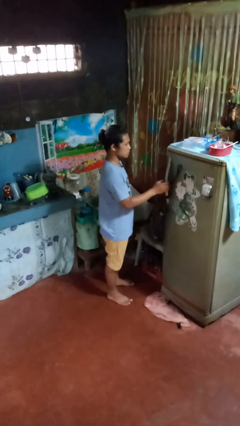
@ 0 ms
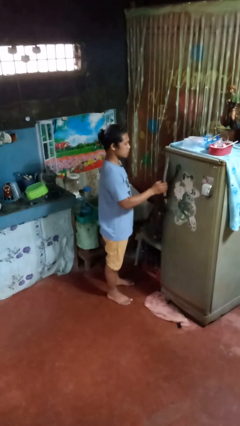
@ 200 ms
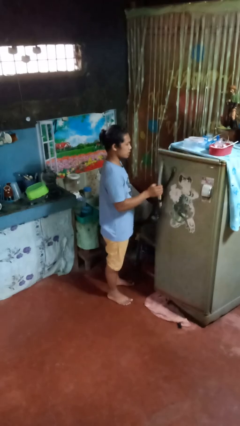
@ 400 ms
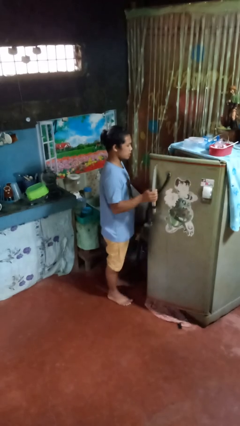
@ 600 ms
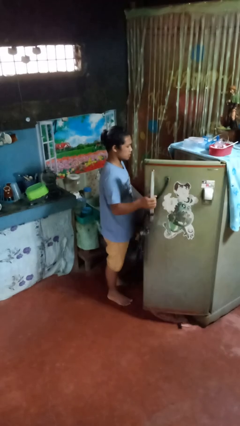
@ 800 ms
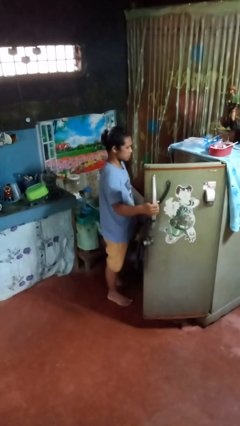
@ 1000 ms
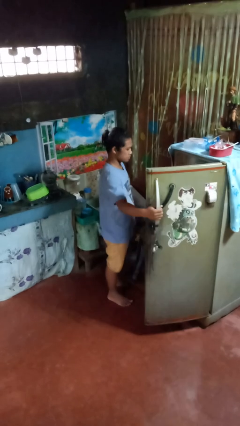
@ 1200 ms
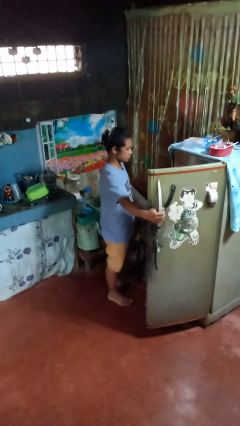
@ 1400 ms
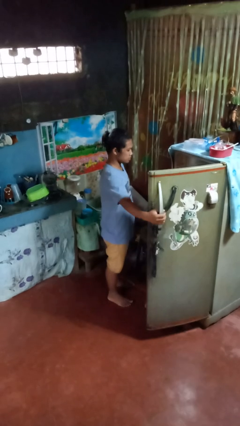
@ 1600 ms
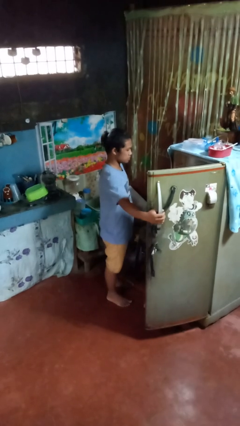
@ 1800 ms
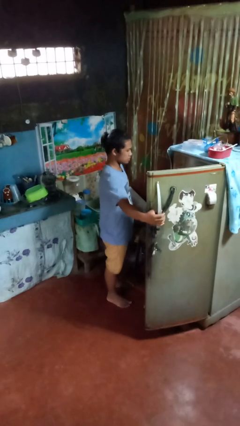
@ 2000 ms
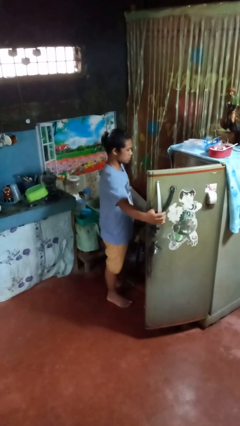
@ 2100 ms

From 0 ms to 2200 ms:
person opens refrigerator

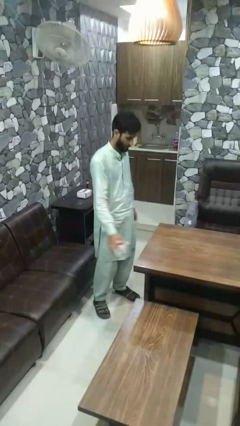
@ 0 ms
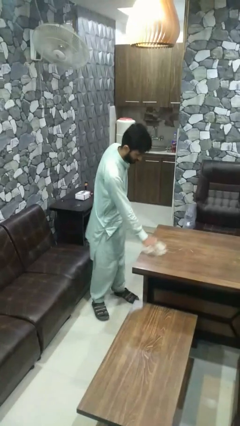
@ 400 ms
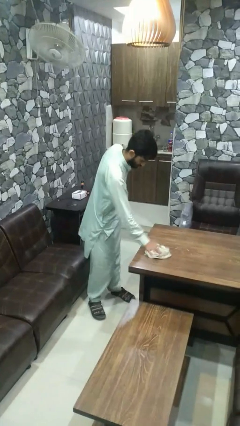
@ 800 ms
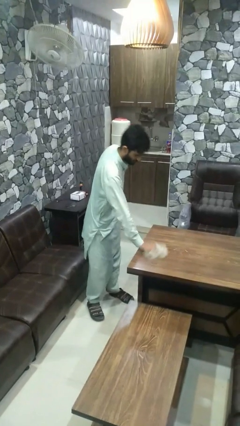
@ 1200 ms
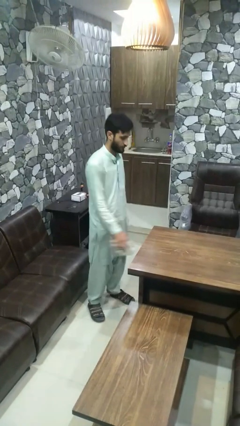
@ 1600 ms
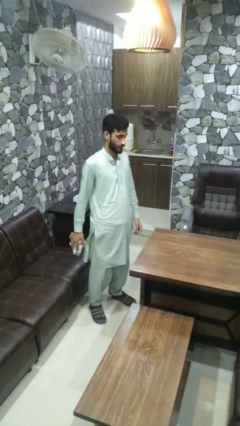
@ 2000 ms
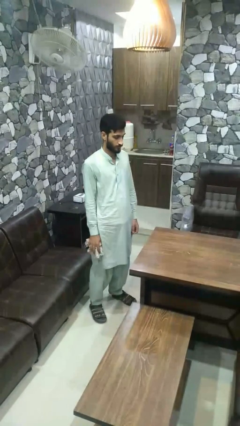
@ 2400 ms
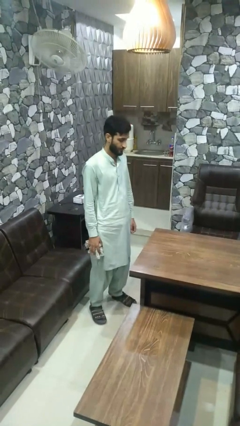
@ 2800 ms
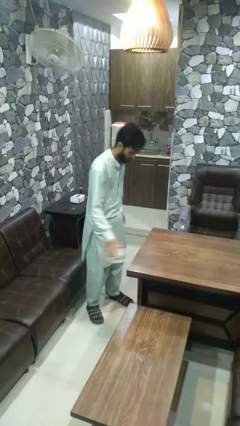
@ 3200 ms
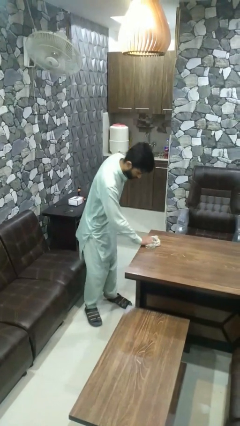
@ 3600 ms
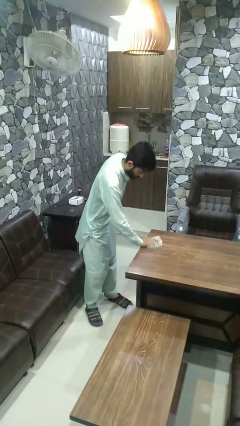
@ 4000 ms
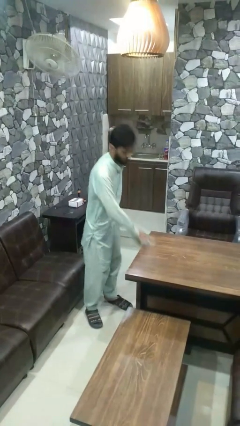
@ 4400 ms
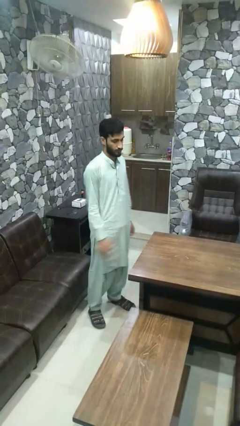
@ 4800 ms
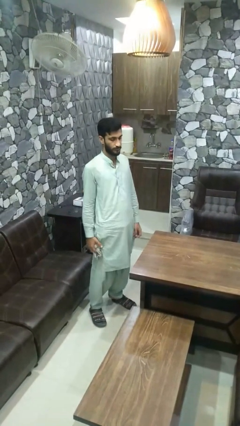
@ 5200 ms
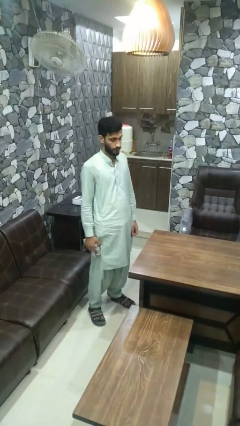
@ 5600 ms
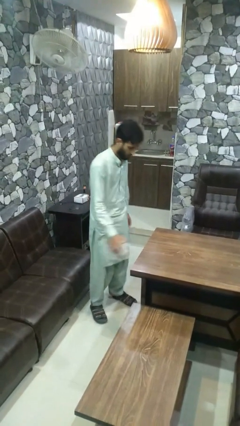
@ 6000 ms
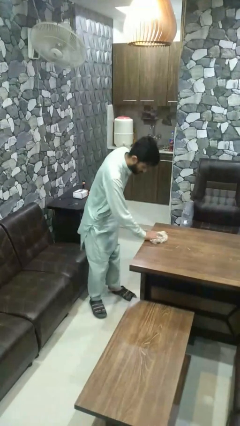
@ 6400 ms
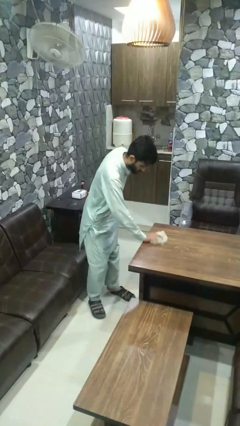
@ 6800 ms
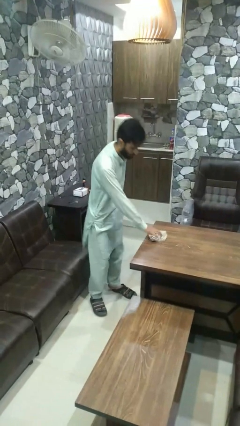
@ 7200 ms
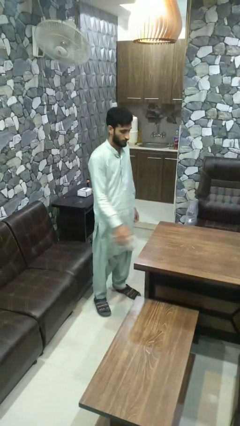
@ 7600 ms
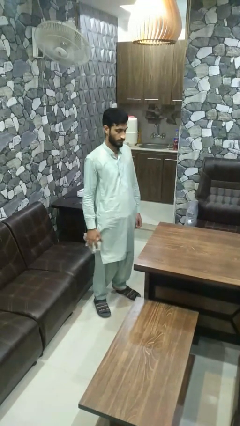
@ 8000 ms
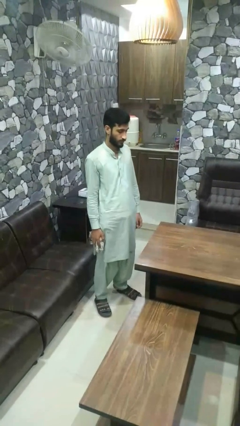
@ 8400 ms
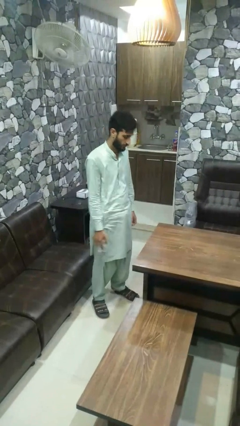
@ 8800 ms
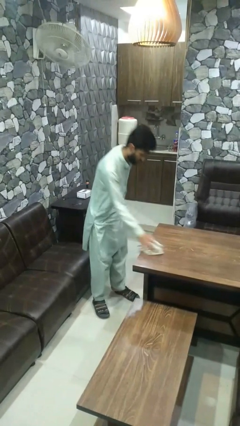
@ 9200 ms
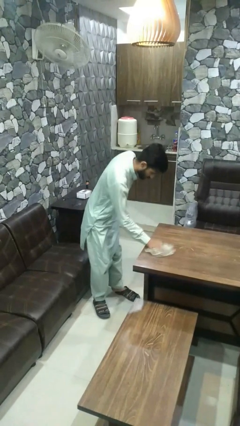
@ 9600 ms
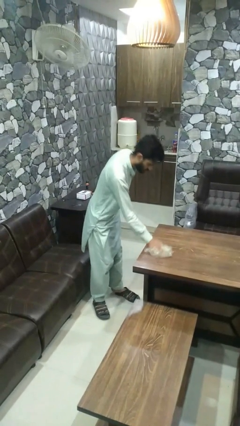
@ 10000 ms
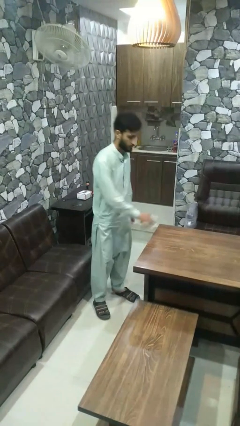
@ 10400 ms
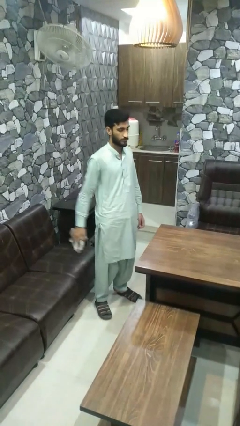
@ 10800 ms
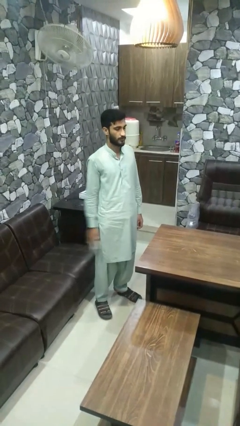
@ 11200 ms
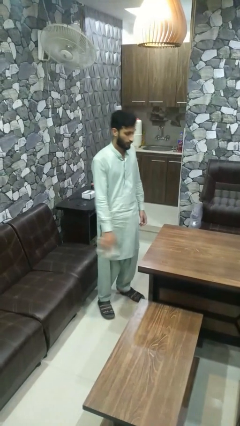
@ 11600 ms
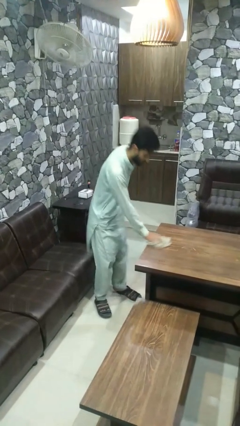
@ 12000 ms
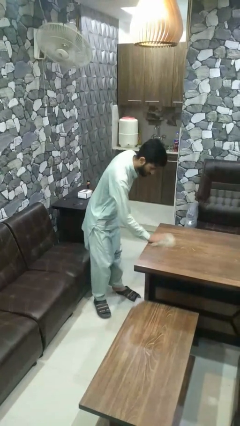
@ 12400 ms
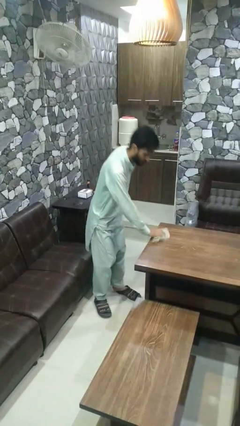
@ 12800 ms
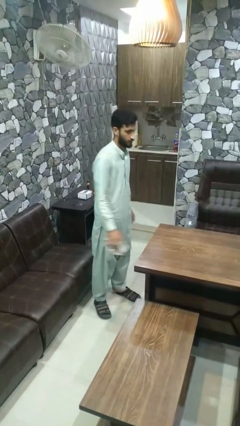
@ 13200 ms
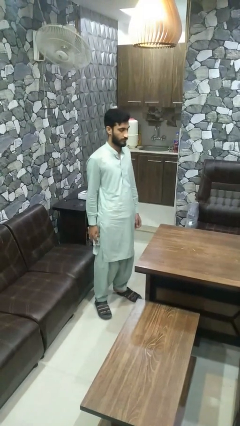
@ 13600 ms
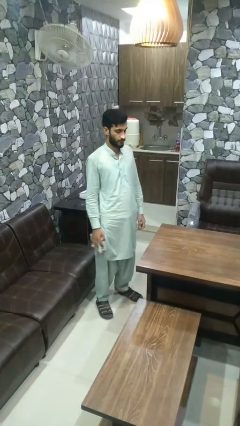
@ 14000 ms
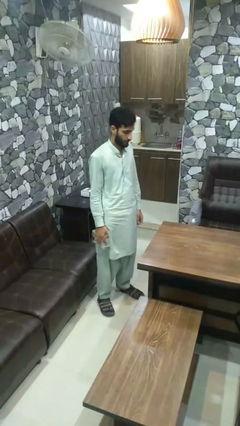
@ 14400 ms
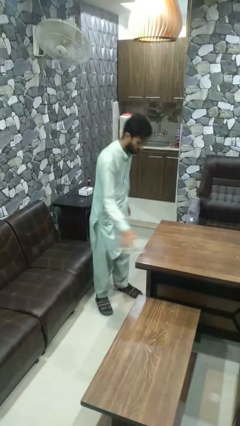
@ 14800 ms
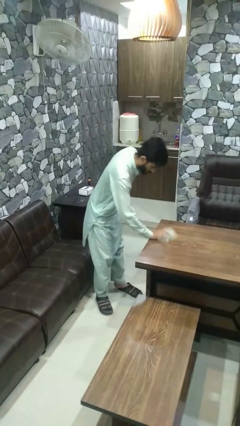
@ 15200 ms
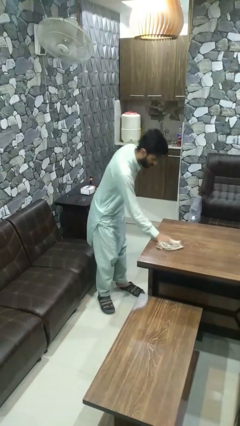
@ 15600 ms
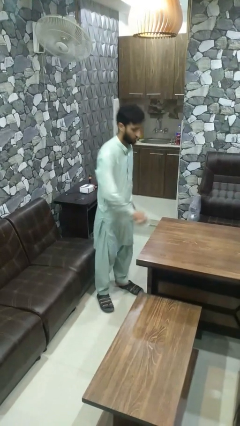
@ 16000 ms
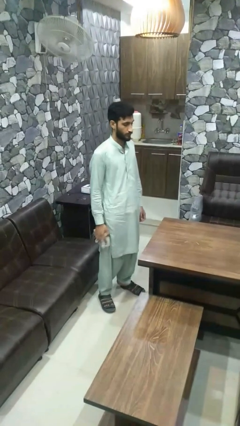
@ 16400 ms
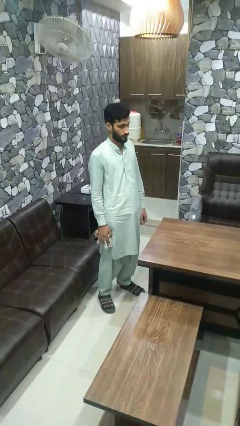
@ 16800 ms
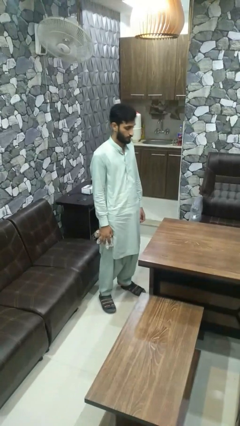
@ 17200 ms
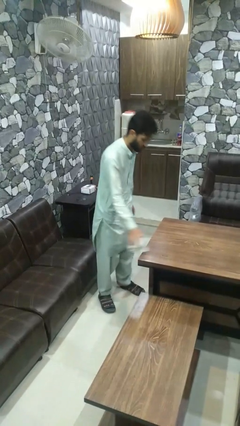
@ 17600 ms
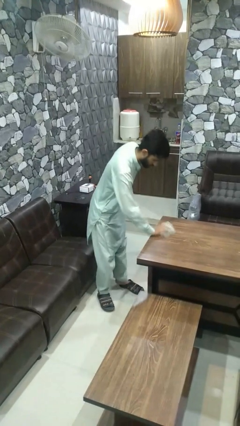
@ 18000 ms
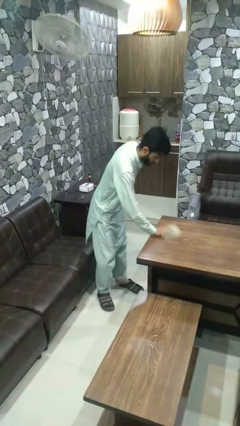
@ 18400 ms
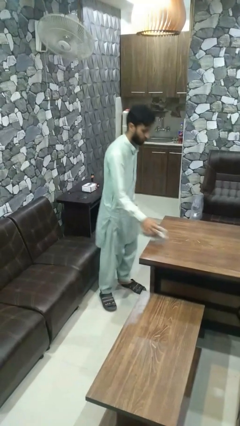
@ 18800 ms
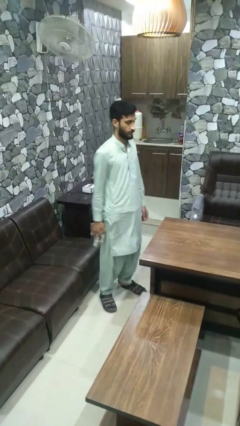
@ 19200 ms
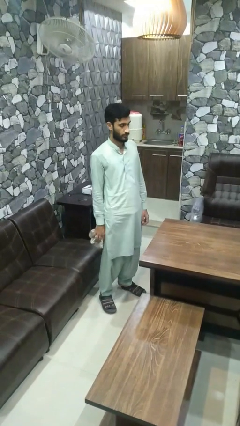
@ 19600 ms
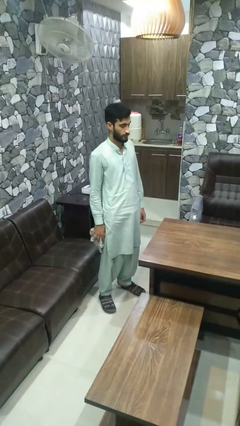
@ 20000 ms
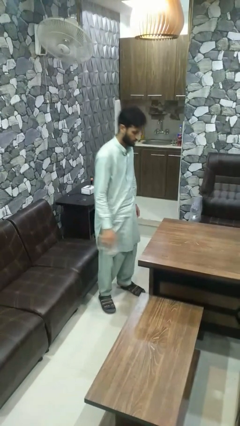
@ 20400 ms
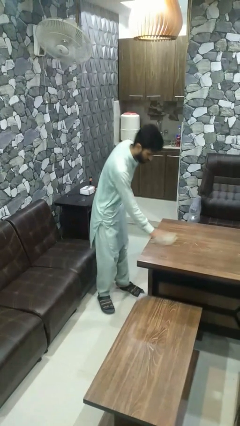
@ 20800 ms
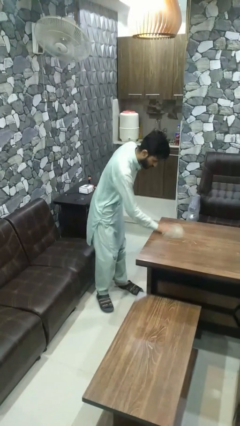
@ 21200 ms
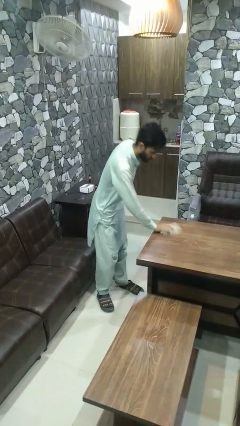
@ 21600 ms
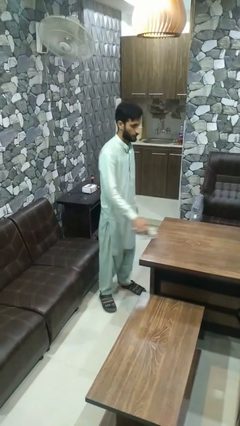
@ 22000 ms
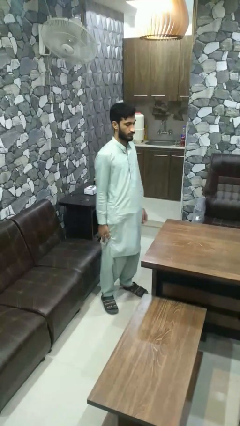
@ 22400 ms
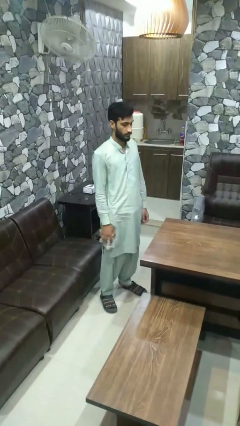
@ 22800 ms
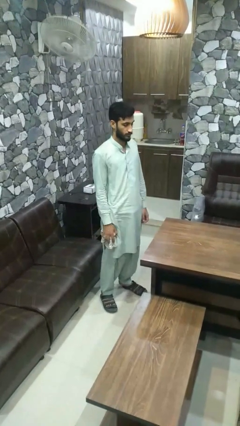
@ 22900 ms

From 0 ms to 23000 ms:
person cleans table with rag

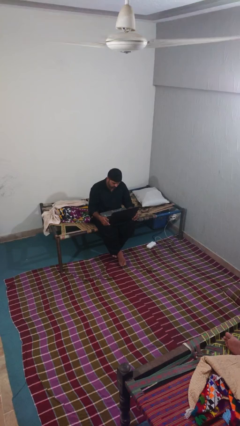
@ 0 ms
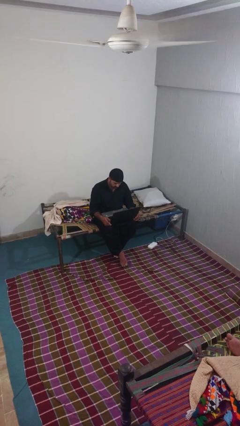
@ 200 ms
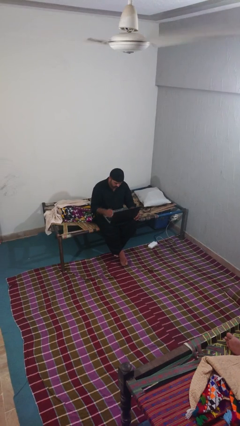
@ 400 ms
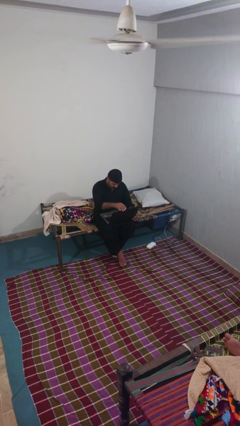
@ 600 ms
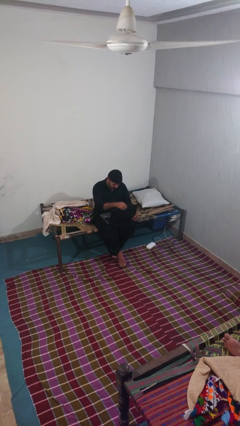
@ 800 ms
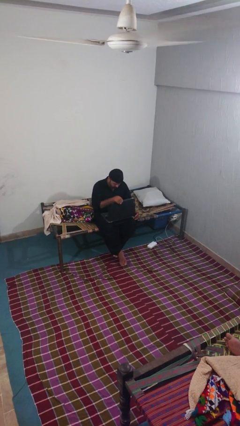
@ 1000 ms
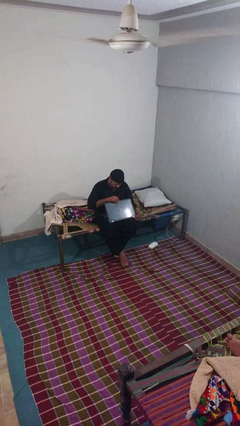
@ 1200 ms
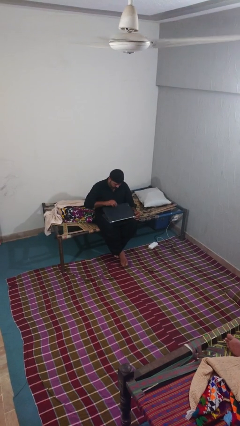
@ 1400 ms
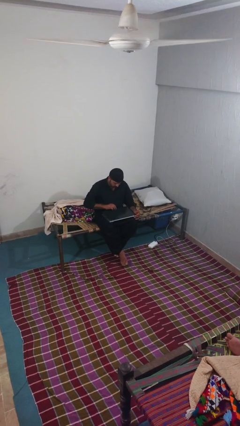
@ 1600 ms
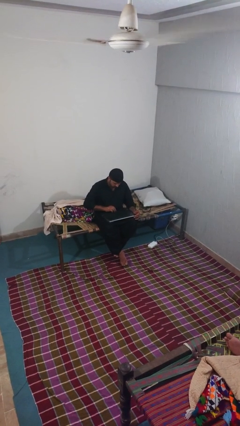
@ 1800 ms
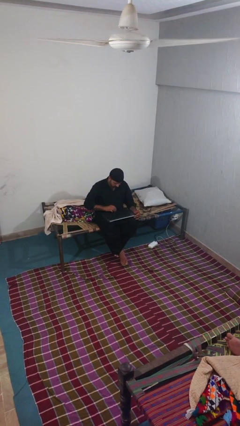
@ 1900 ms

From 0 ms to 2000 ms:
person closes laptop

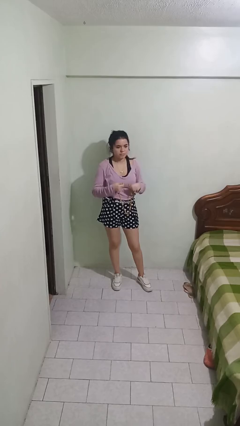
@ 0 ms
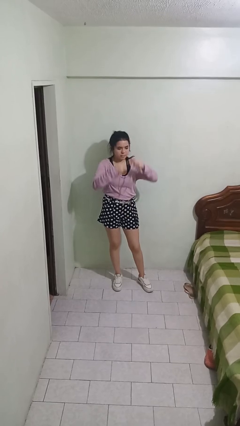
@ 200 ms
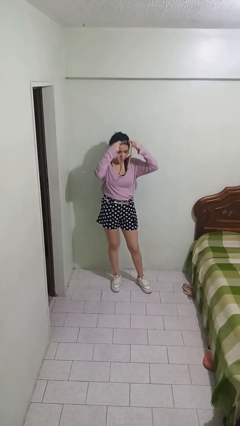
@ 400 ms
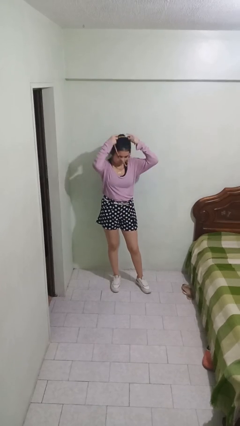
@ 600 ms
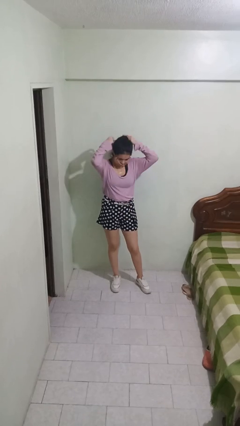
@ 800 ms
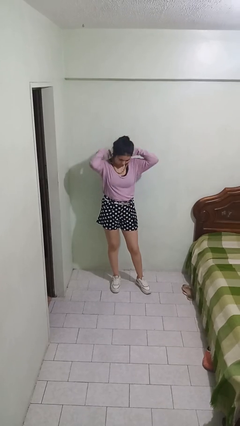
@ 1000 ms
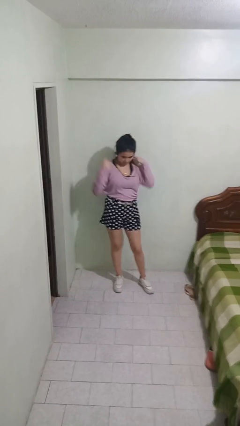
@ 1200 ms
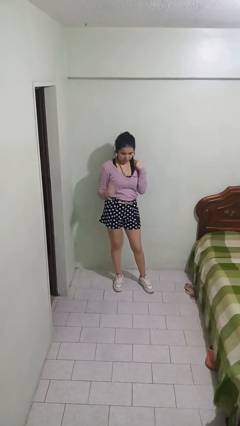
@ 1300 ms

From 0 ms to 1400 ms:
person puts on necklace

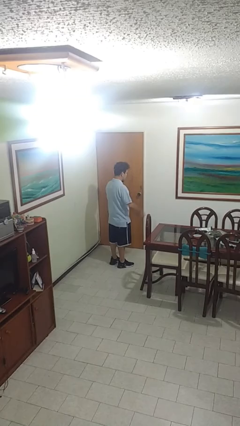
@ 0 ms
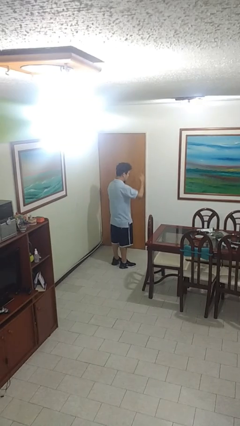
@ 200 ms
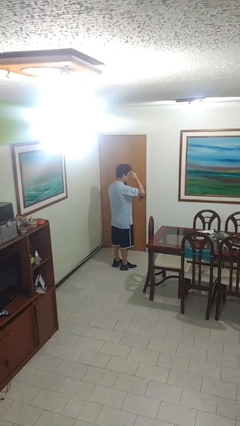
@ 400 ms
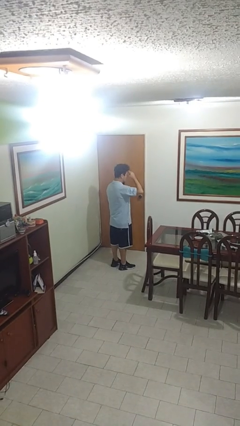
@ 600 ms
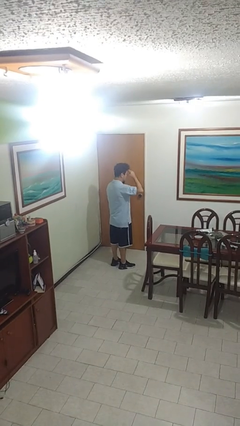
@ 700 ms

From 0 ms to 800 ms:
person salutes
